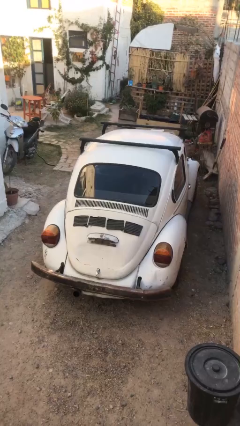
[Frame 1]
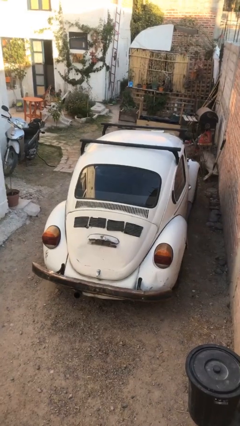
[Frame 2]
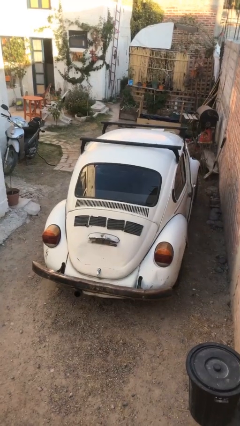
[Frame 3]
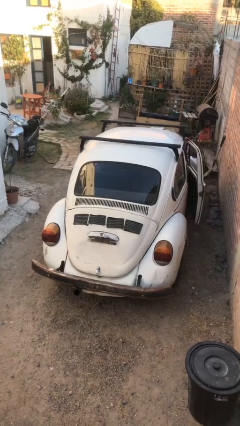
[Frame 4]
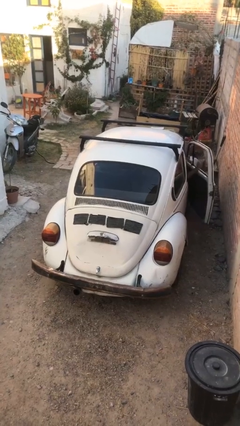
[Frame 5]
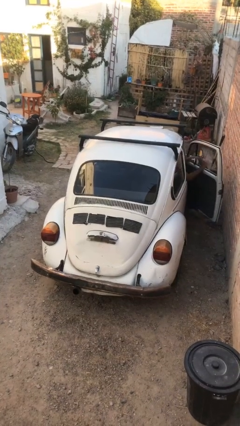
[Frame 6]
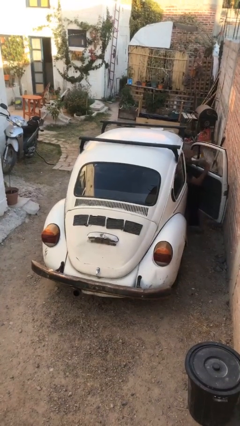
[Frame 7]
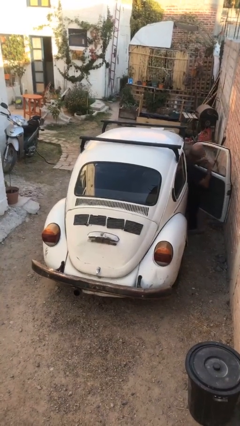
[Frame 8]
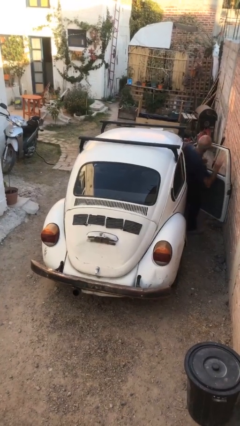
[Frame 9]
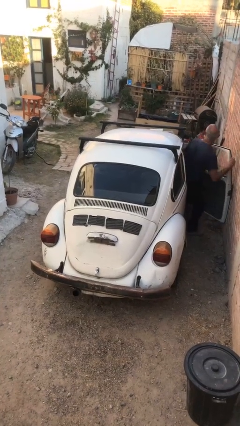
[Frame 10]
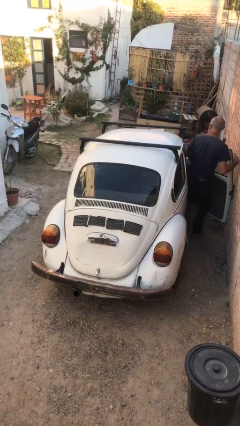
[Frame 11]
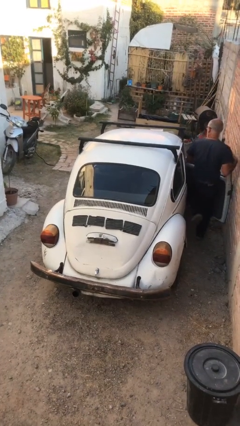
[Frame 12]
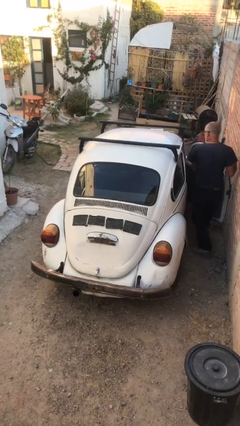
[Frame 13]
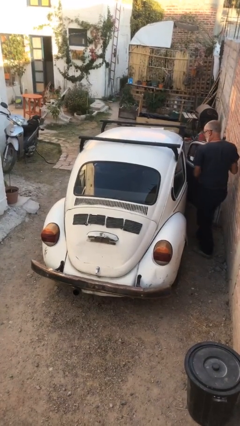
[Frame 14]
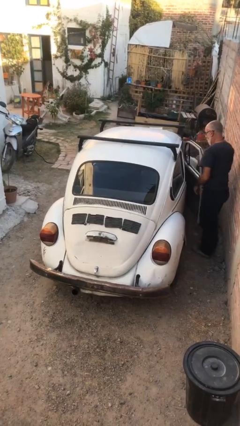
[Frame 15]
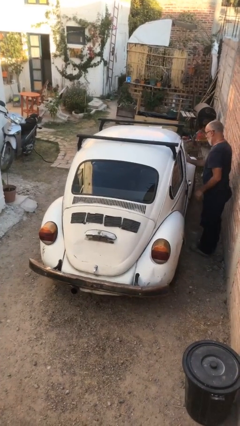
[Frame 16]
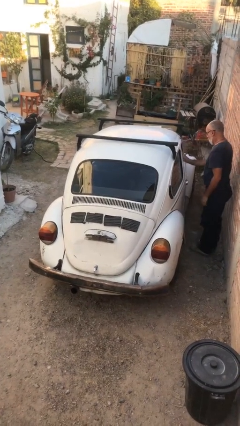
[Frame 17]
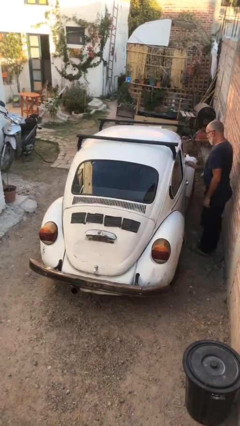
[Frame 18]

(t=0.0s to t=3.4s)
car drops off person

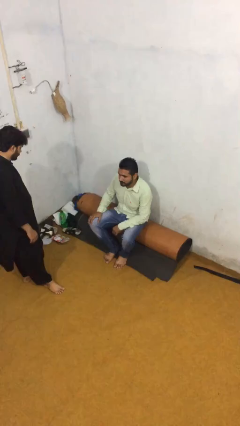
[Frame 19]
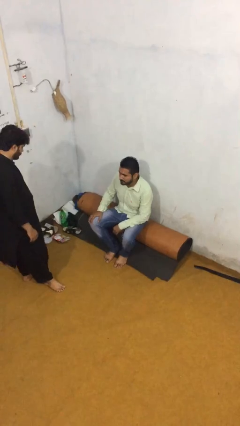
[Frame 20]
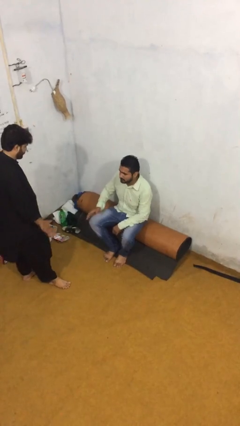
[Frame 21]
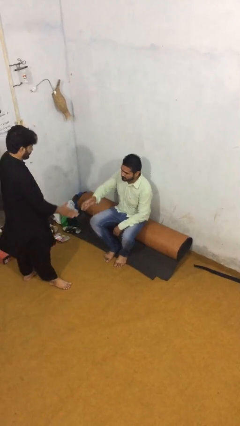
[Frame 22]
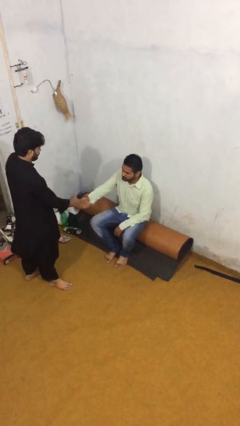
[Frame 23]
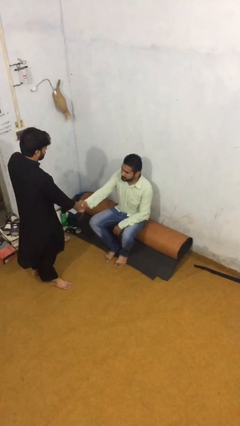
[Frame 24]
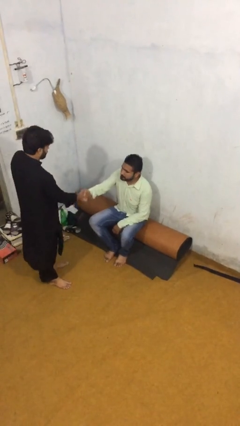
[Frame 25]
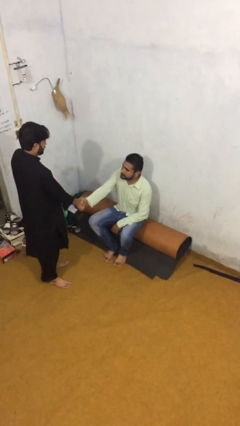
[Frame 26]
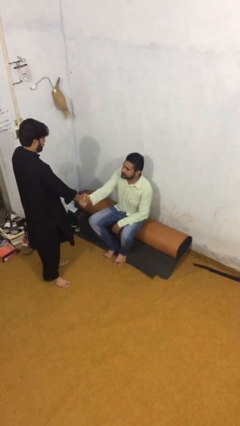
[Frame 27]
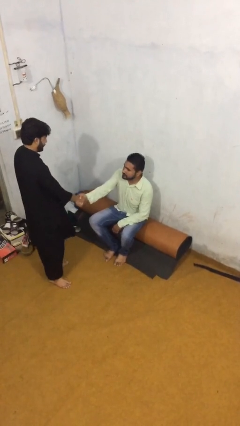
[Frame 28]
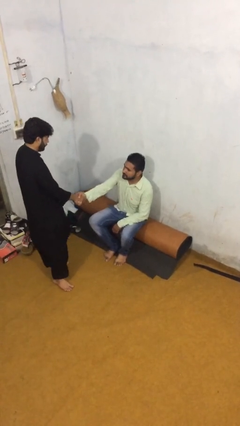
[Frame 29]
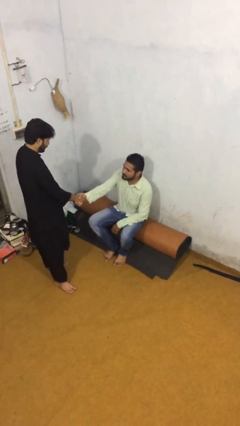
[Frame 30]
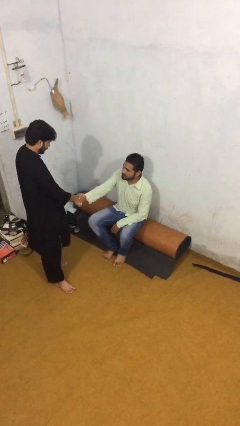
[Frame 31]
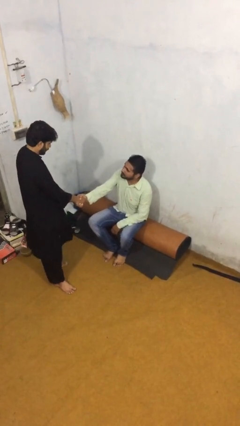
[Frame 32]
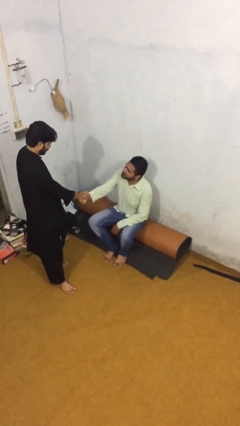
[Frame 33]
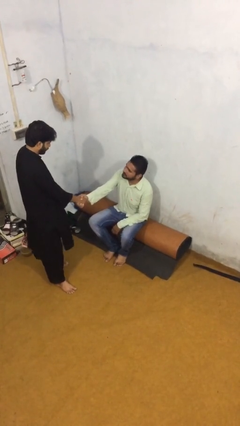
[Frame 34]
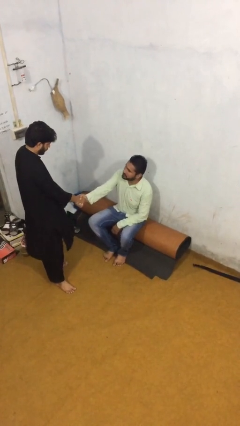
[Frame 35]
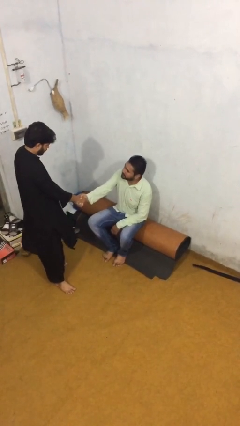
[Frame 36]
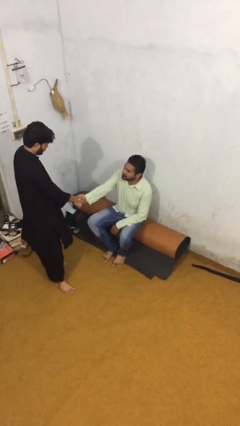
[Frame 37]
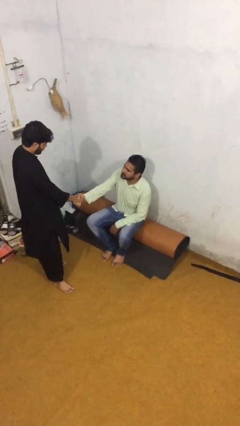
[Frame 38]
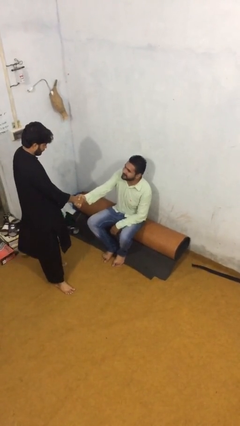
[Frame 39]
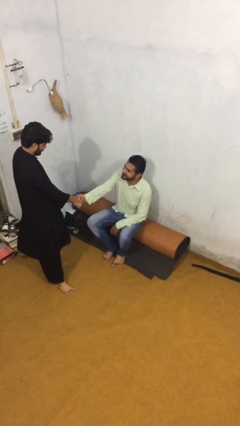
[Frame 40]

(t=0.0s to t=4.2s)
person shakes hand

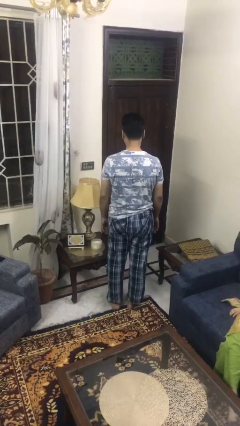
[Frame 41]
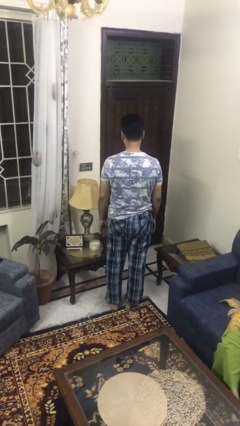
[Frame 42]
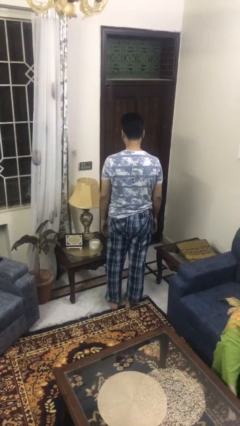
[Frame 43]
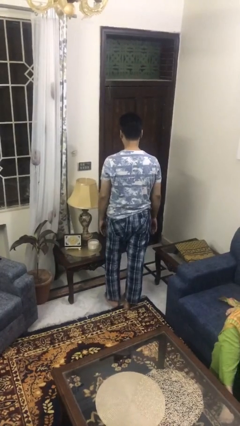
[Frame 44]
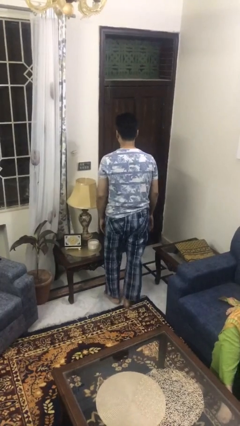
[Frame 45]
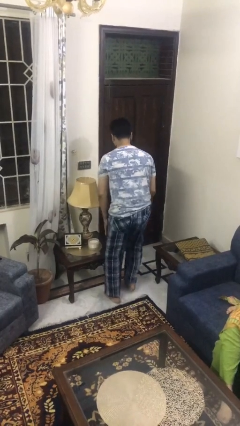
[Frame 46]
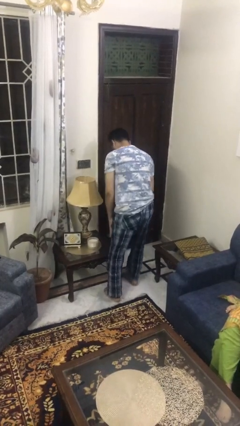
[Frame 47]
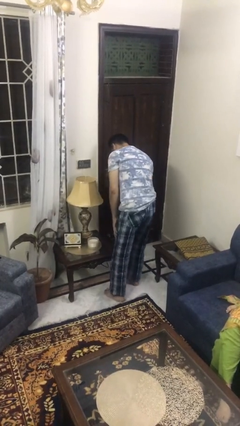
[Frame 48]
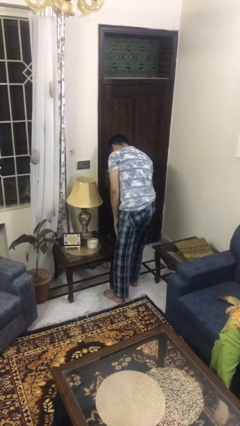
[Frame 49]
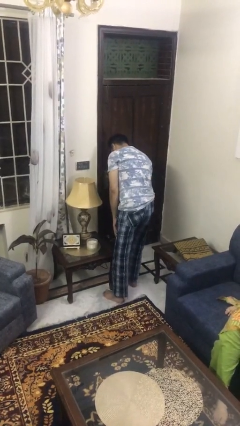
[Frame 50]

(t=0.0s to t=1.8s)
person bumps into table

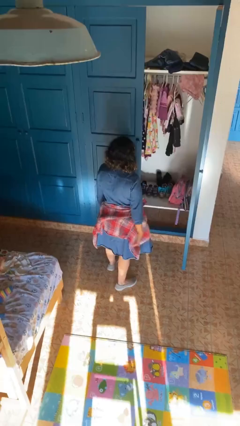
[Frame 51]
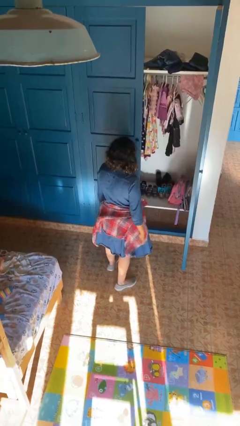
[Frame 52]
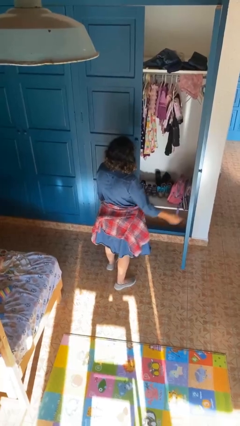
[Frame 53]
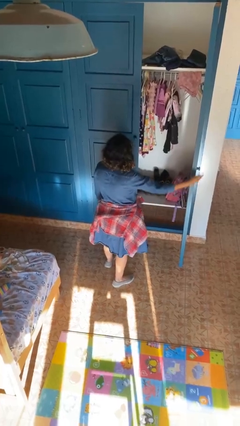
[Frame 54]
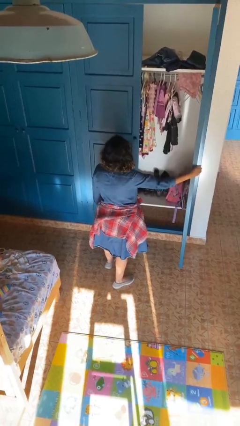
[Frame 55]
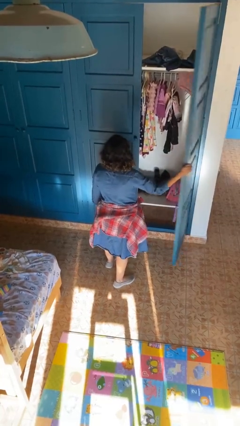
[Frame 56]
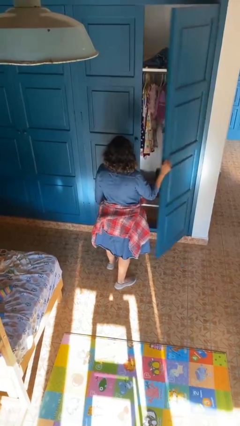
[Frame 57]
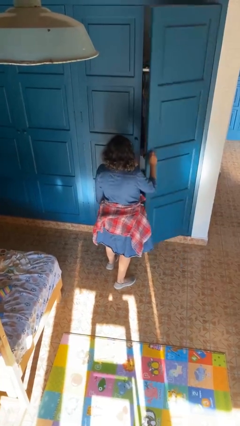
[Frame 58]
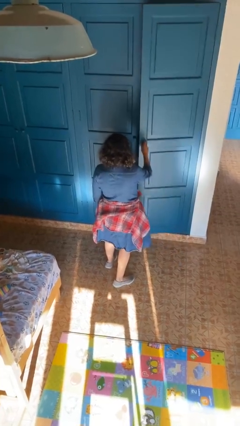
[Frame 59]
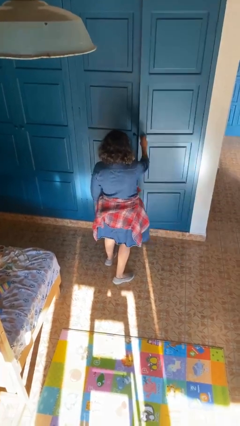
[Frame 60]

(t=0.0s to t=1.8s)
person closes closet door

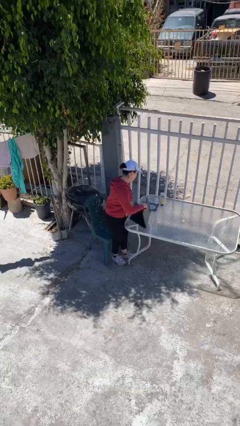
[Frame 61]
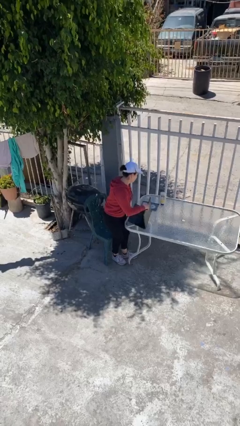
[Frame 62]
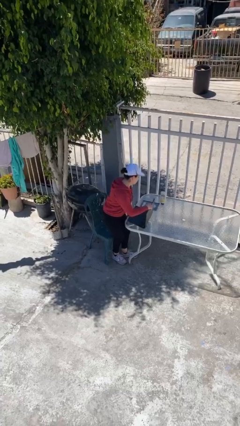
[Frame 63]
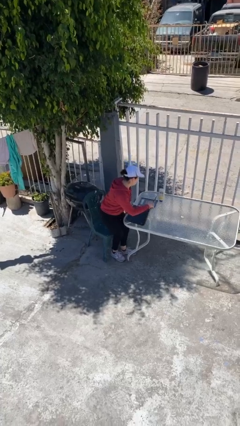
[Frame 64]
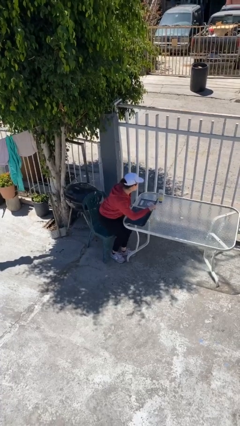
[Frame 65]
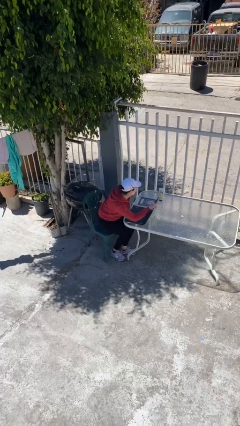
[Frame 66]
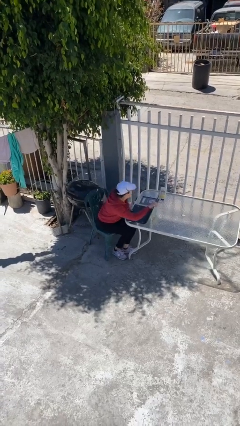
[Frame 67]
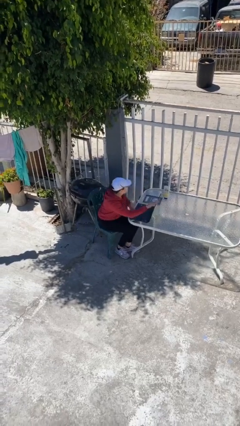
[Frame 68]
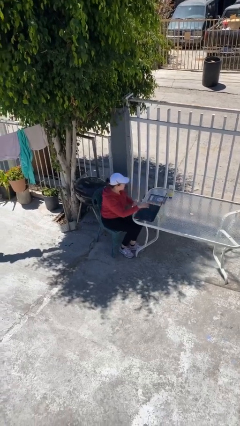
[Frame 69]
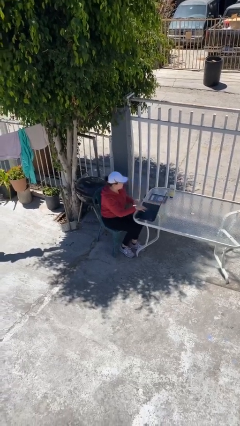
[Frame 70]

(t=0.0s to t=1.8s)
person sits down

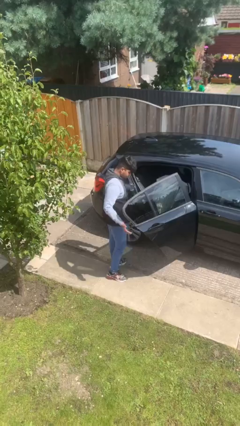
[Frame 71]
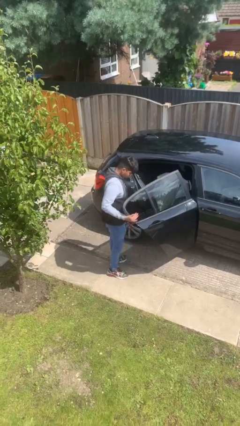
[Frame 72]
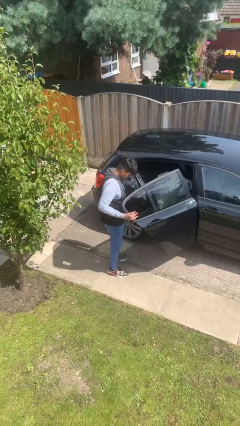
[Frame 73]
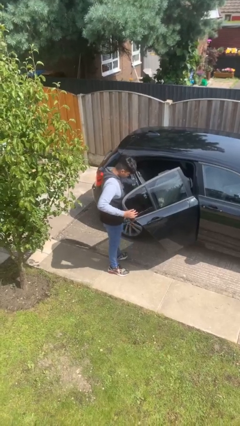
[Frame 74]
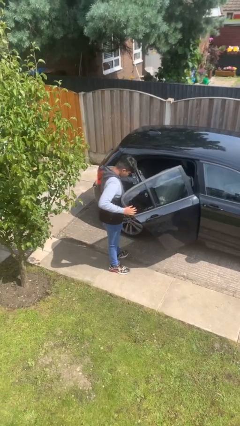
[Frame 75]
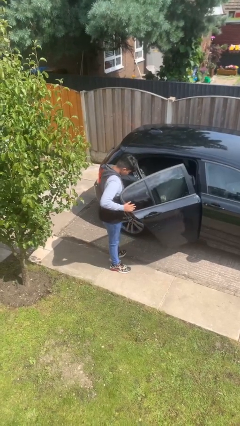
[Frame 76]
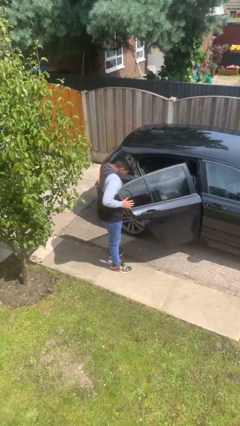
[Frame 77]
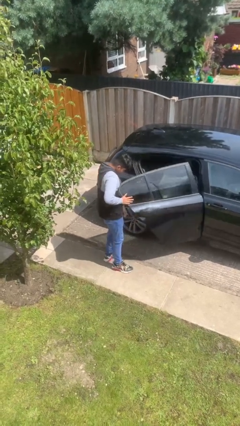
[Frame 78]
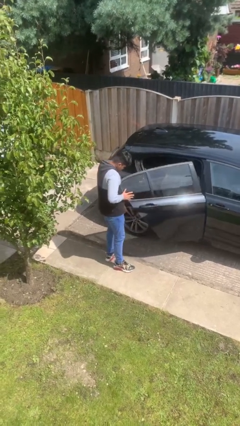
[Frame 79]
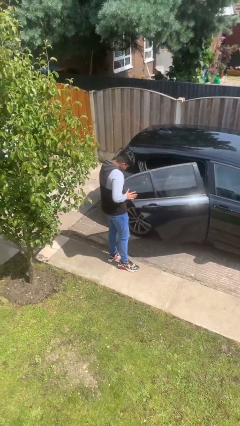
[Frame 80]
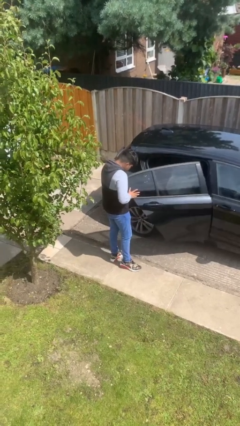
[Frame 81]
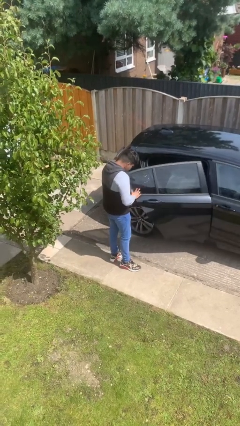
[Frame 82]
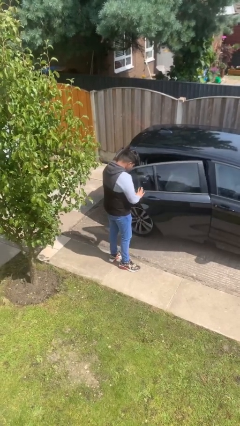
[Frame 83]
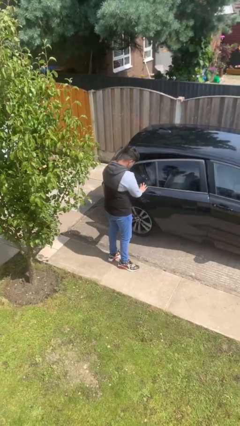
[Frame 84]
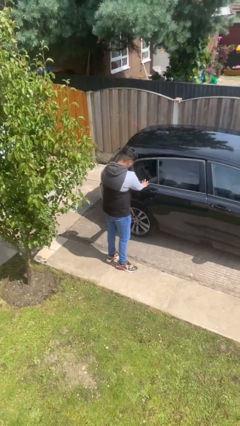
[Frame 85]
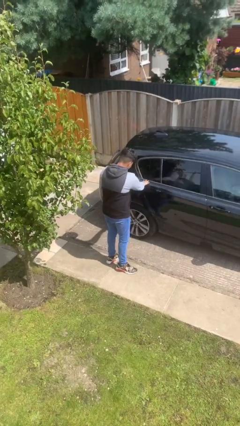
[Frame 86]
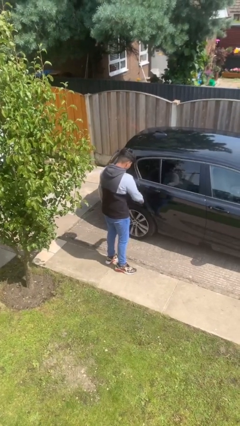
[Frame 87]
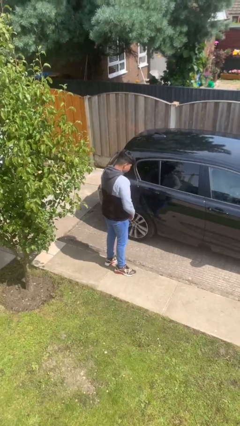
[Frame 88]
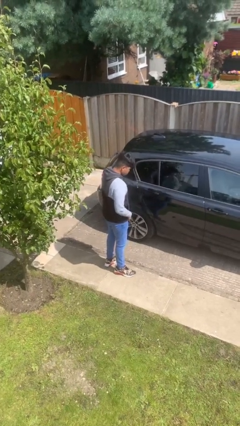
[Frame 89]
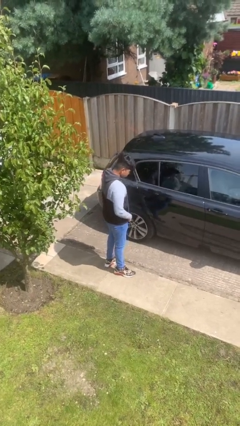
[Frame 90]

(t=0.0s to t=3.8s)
person closes car door

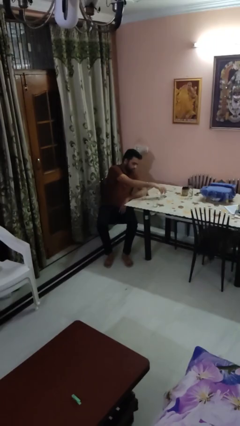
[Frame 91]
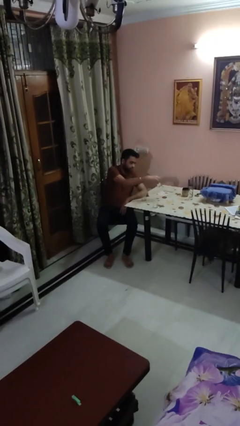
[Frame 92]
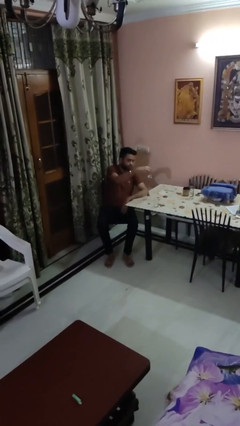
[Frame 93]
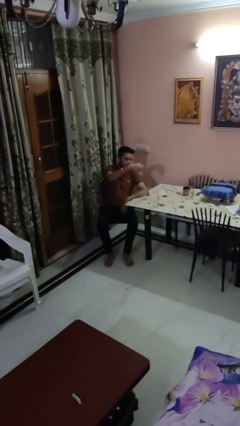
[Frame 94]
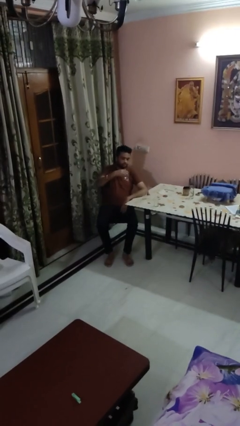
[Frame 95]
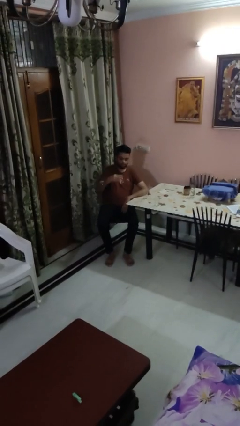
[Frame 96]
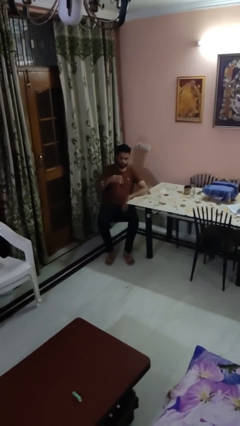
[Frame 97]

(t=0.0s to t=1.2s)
person picks up object from table
